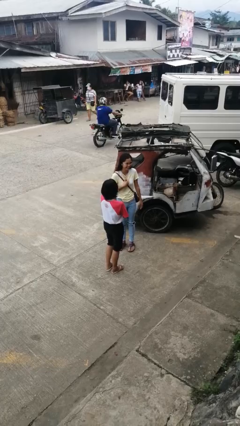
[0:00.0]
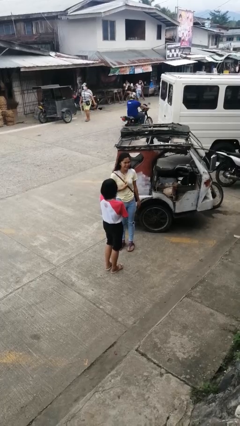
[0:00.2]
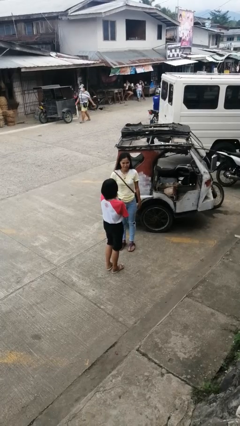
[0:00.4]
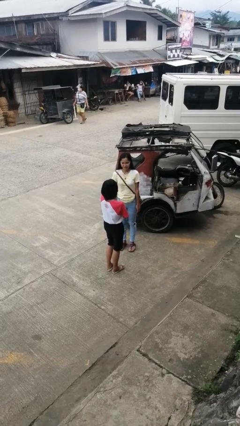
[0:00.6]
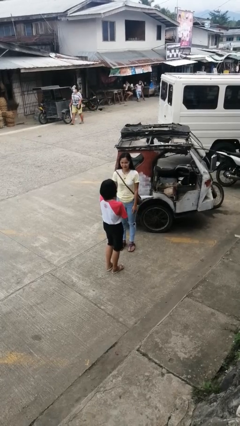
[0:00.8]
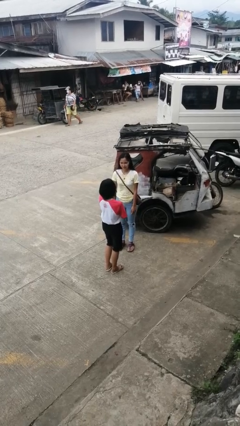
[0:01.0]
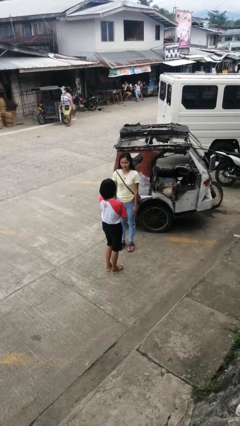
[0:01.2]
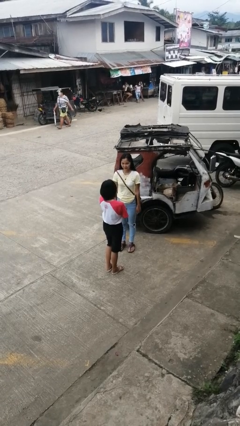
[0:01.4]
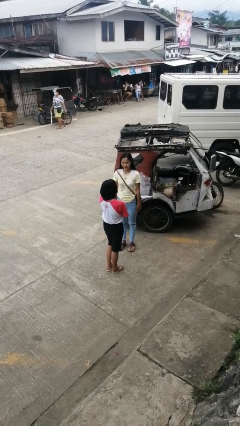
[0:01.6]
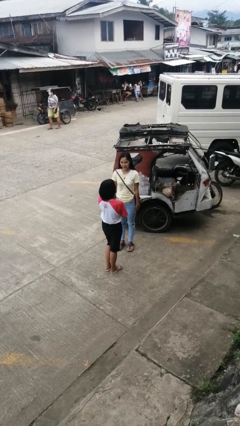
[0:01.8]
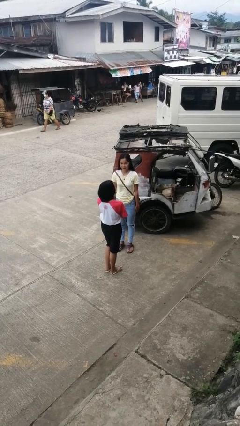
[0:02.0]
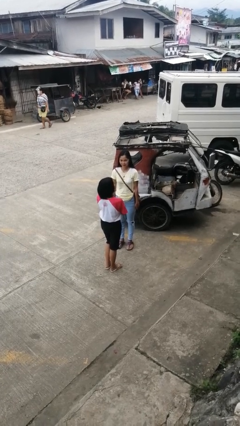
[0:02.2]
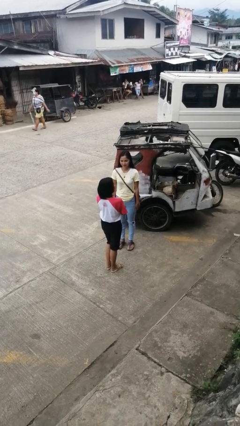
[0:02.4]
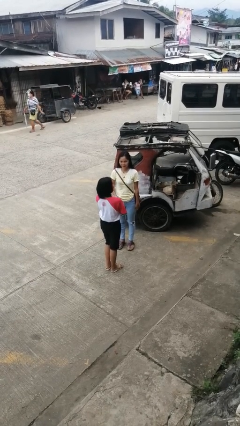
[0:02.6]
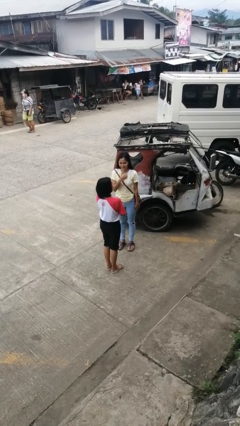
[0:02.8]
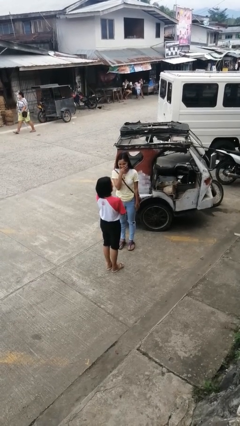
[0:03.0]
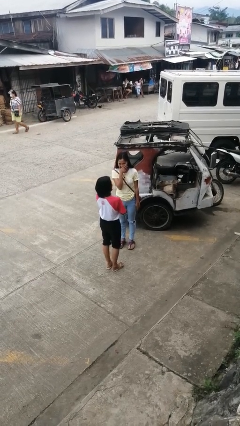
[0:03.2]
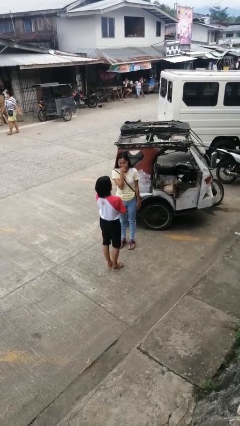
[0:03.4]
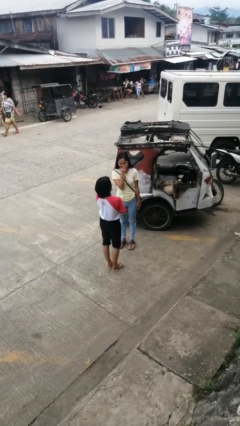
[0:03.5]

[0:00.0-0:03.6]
person laughs with person

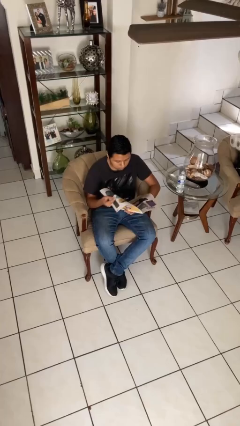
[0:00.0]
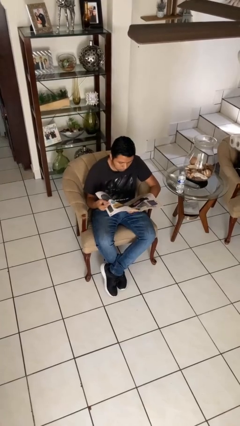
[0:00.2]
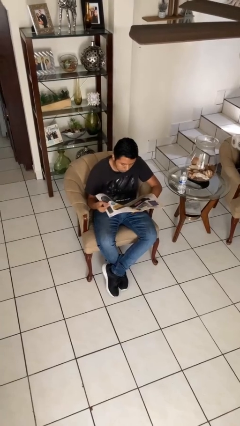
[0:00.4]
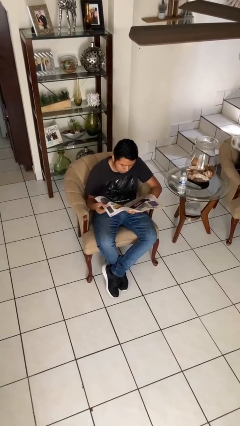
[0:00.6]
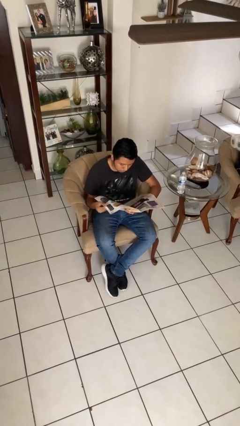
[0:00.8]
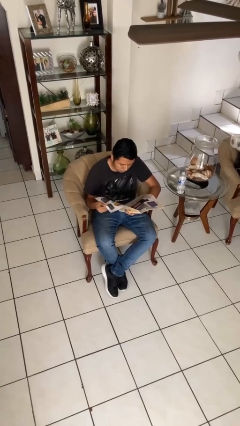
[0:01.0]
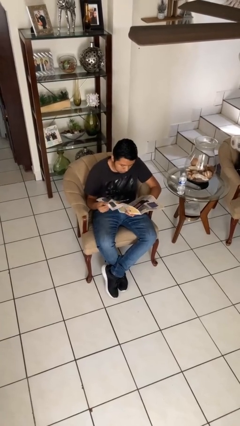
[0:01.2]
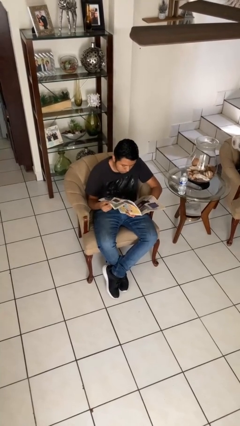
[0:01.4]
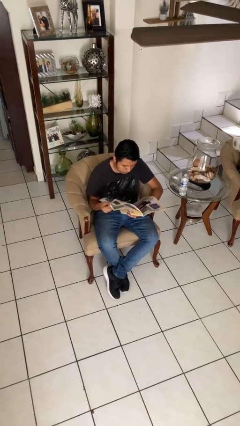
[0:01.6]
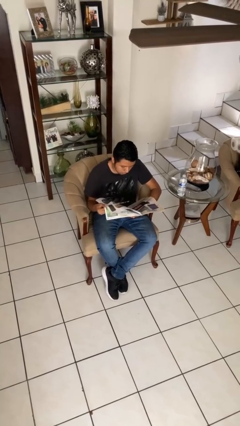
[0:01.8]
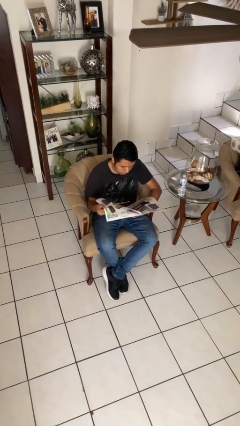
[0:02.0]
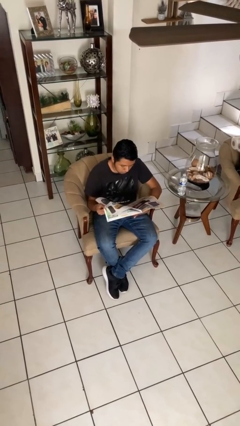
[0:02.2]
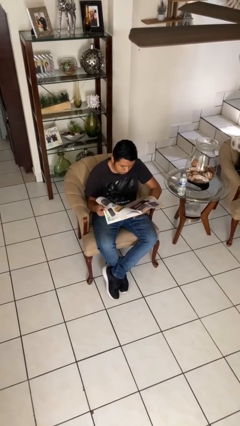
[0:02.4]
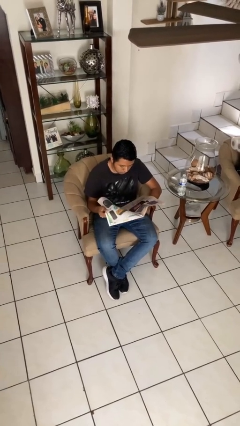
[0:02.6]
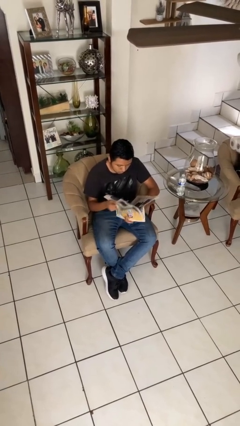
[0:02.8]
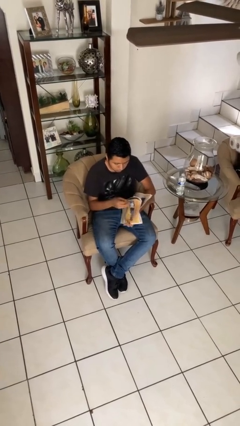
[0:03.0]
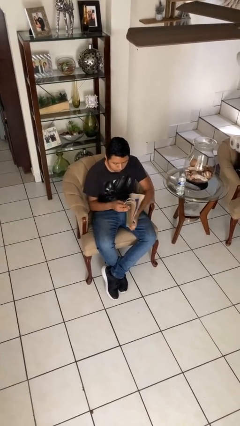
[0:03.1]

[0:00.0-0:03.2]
person reads newspaper

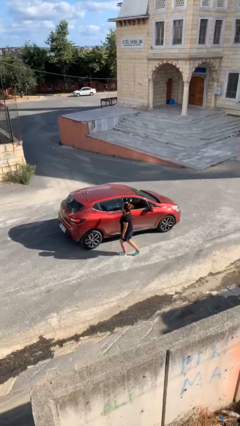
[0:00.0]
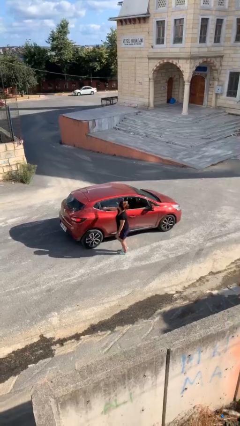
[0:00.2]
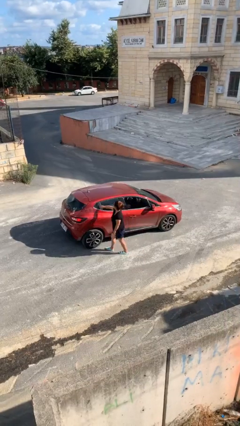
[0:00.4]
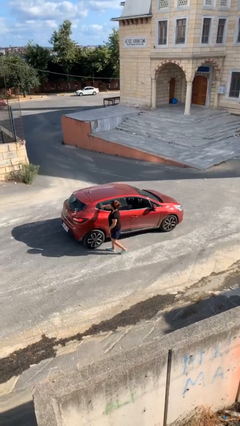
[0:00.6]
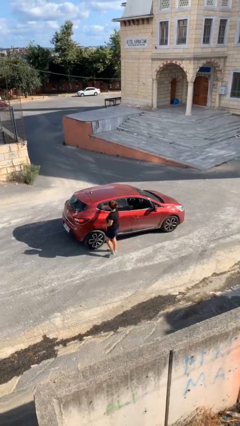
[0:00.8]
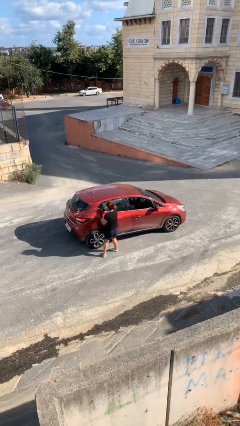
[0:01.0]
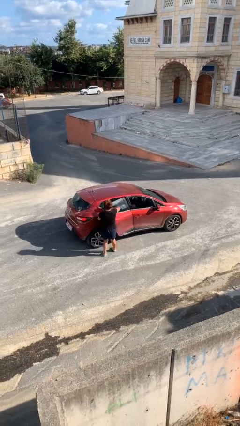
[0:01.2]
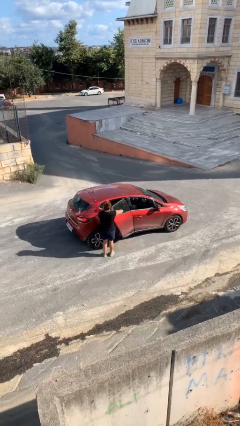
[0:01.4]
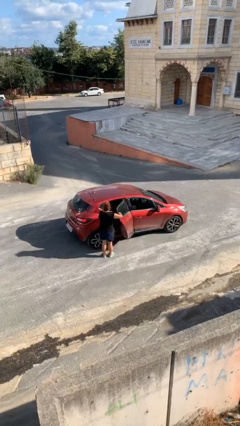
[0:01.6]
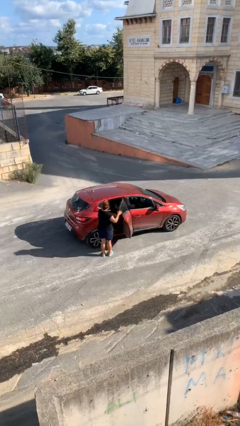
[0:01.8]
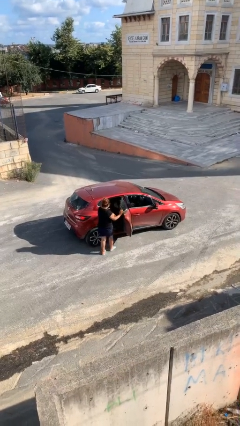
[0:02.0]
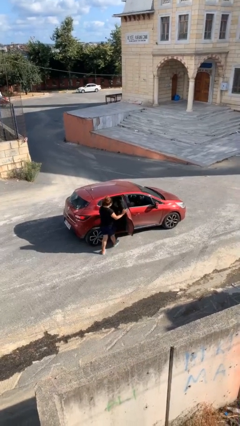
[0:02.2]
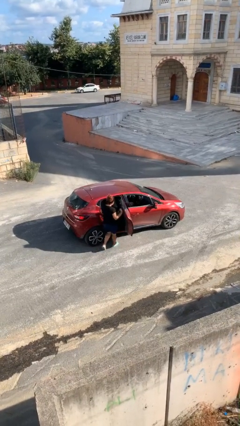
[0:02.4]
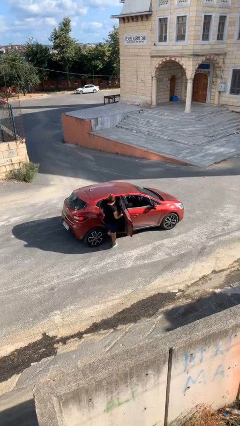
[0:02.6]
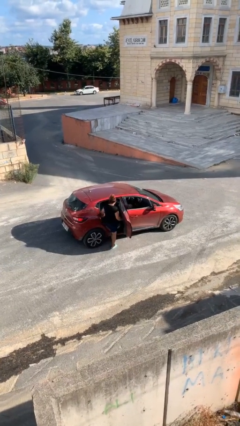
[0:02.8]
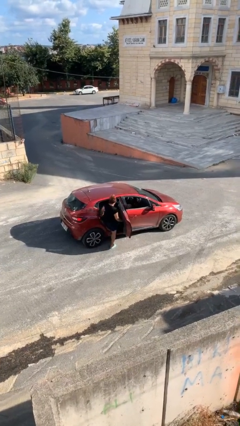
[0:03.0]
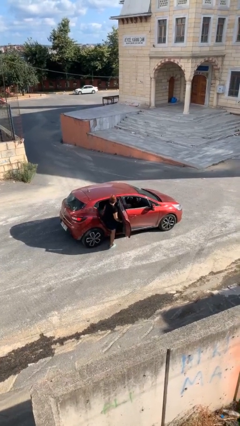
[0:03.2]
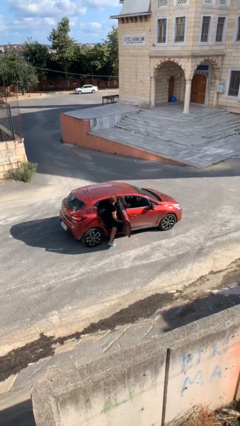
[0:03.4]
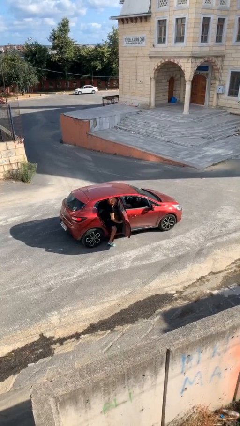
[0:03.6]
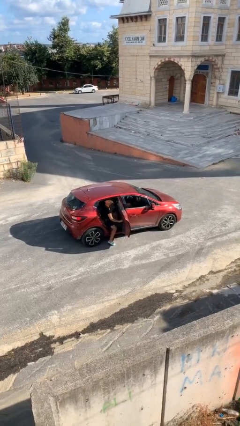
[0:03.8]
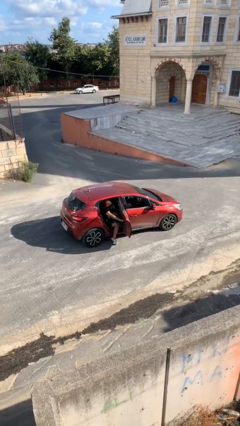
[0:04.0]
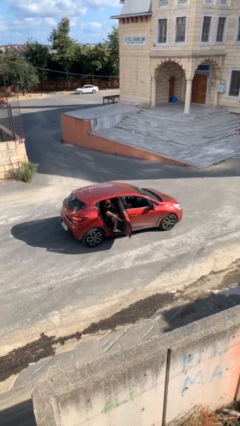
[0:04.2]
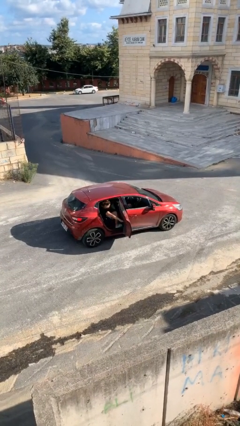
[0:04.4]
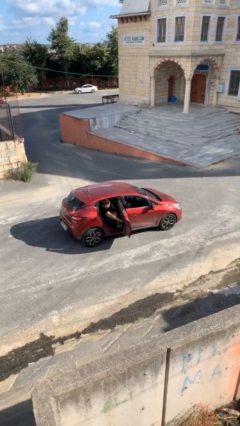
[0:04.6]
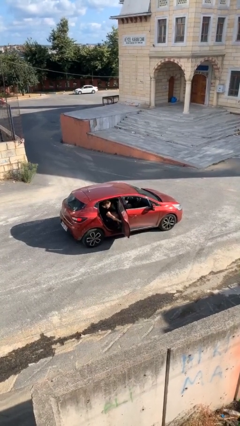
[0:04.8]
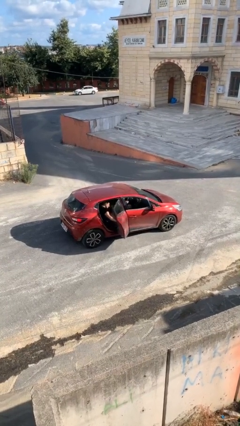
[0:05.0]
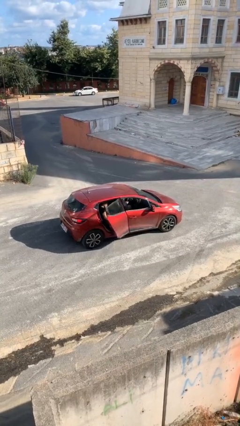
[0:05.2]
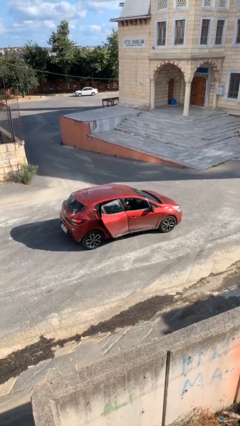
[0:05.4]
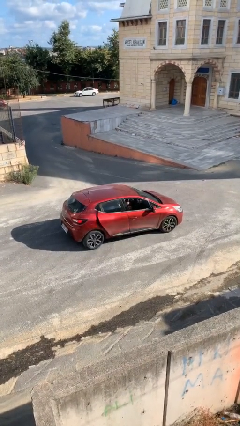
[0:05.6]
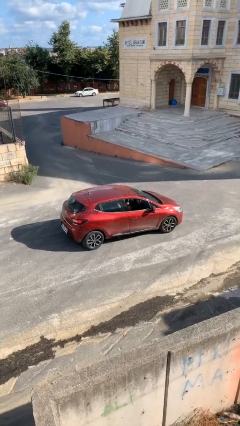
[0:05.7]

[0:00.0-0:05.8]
car picks up person

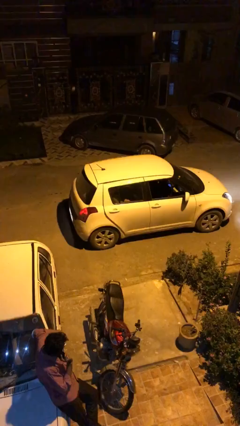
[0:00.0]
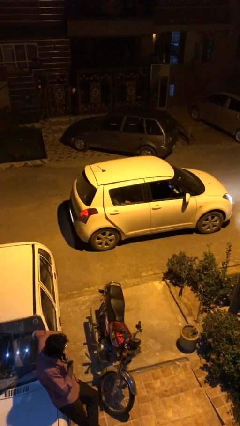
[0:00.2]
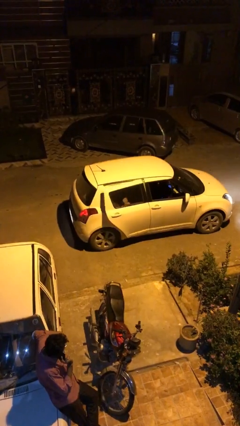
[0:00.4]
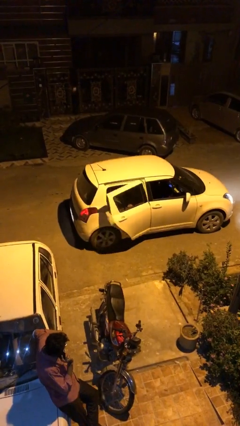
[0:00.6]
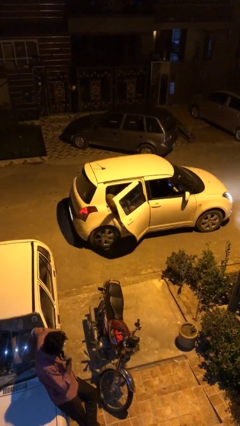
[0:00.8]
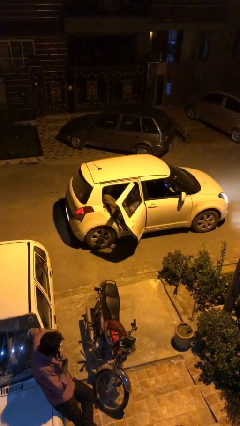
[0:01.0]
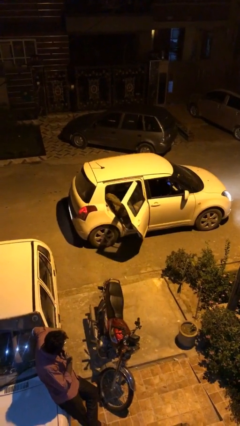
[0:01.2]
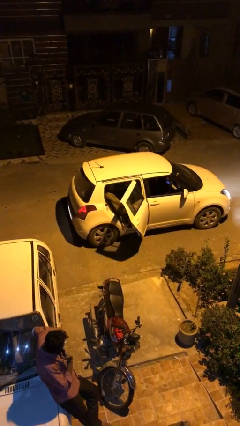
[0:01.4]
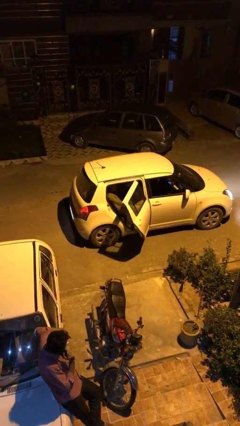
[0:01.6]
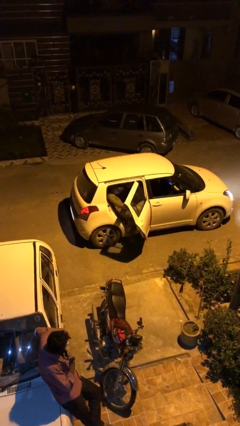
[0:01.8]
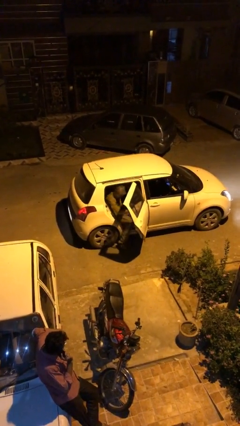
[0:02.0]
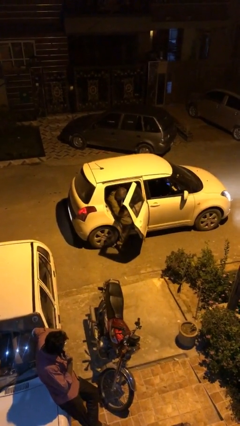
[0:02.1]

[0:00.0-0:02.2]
person opens car door

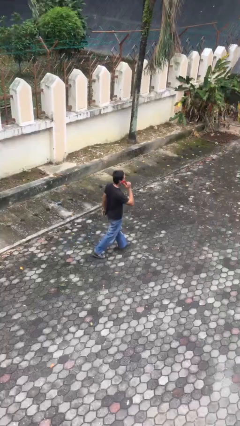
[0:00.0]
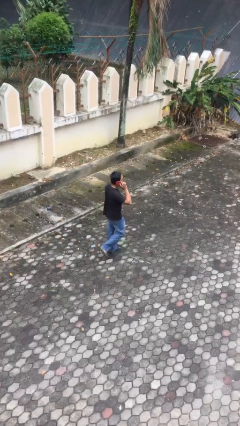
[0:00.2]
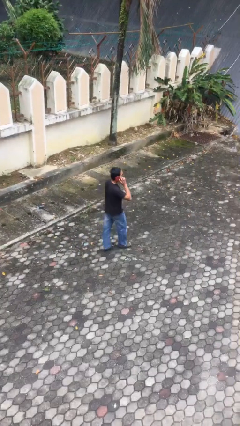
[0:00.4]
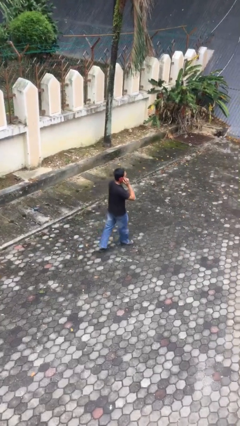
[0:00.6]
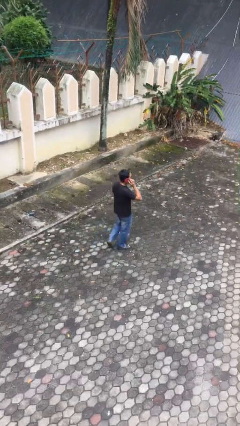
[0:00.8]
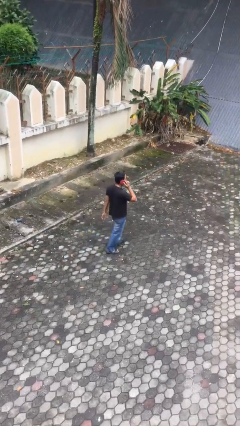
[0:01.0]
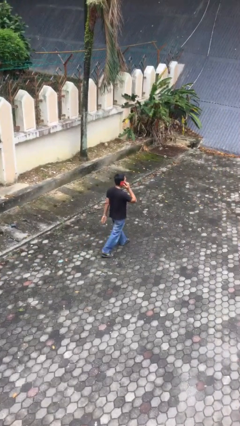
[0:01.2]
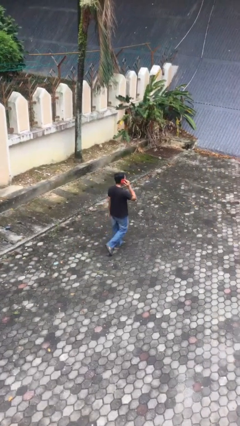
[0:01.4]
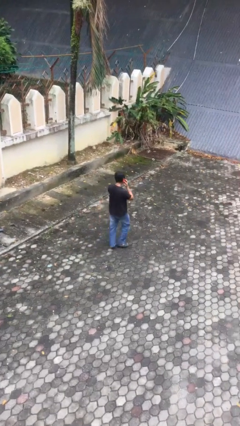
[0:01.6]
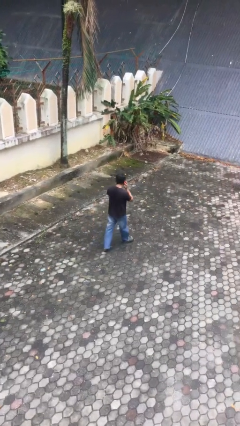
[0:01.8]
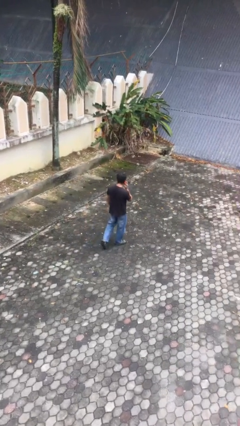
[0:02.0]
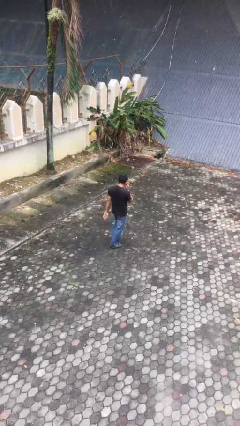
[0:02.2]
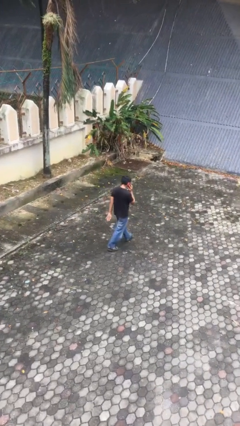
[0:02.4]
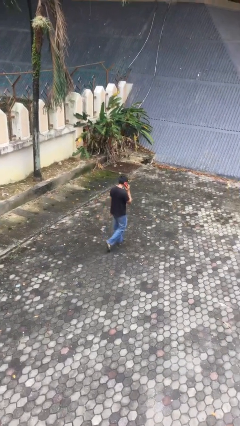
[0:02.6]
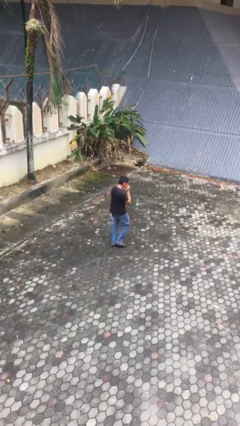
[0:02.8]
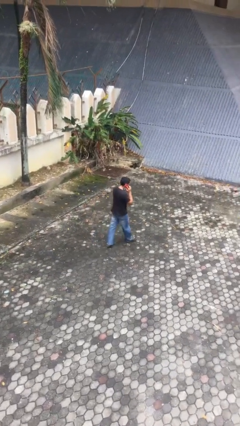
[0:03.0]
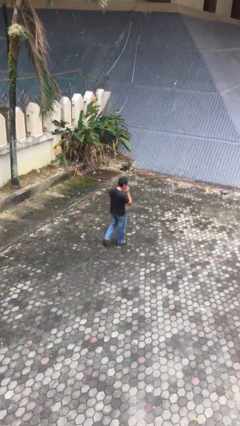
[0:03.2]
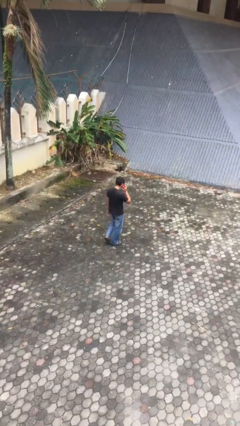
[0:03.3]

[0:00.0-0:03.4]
person talks on phone
